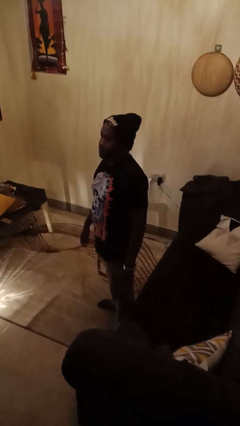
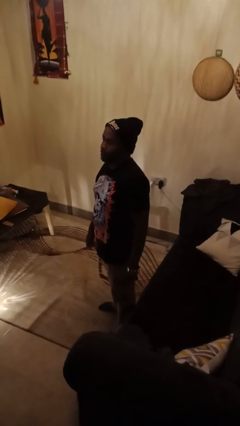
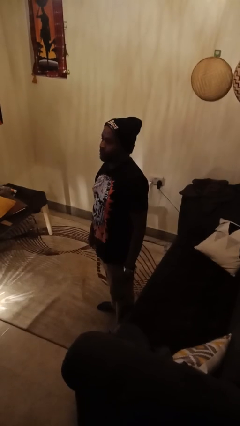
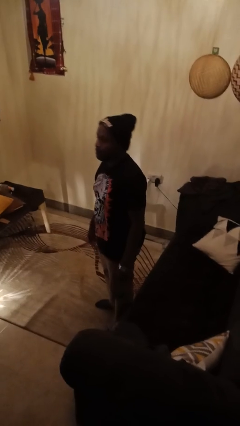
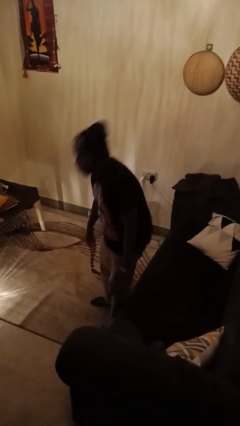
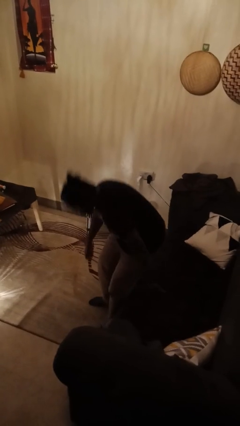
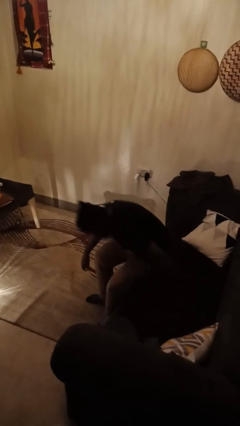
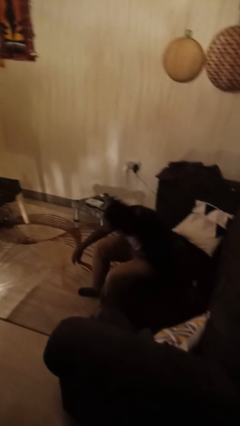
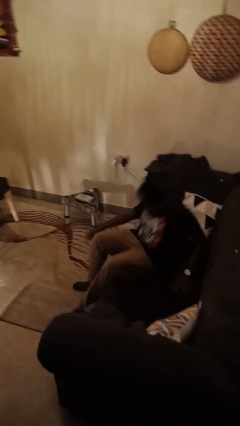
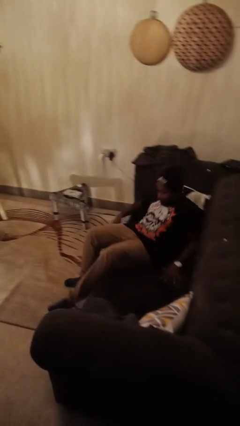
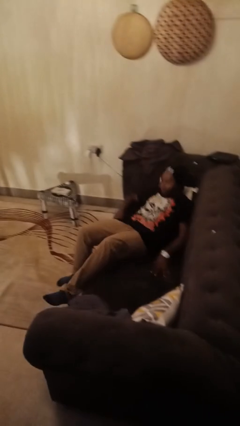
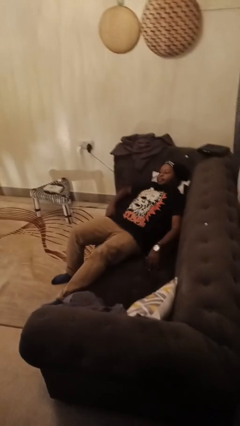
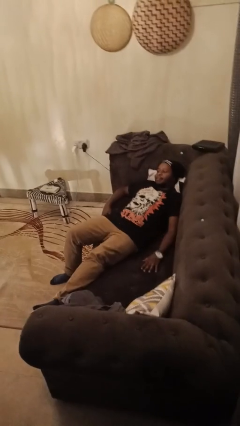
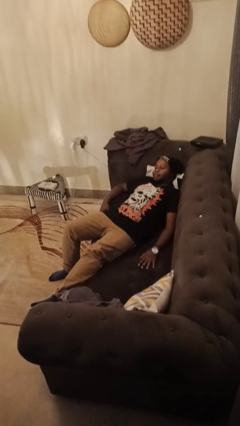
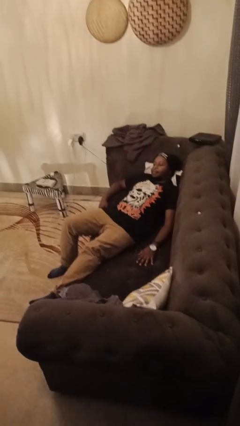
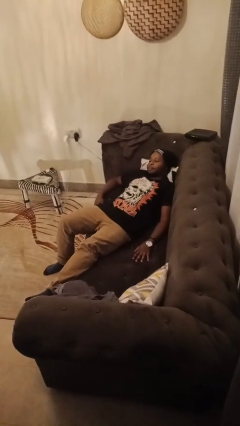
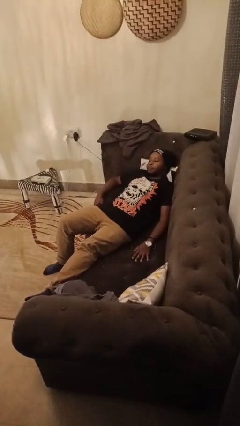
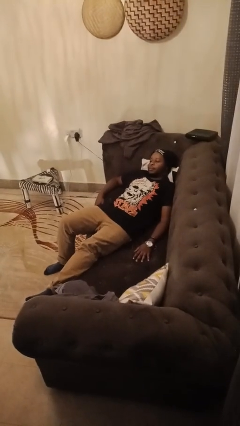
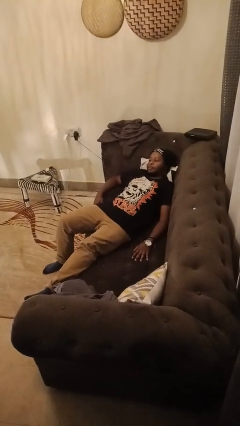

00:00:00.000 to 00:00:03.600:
person lies down on couch

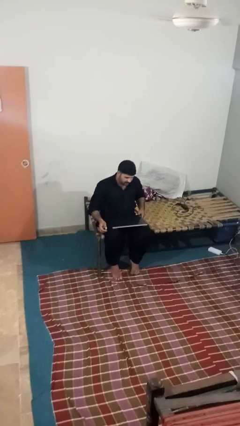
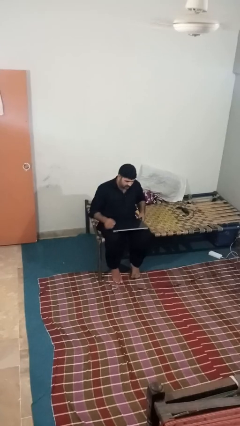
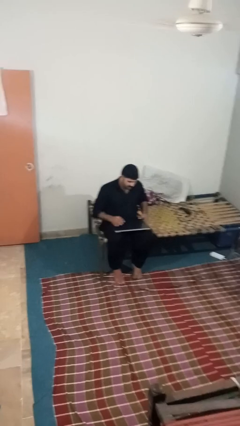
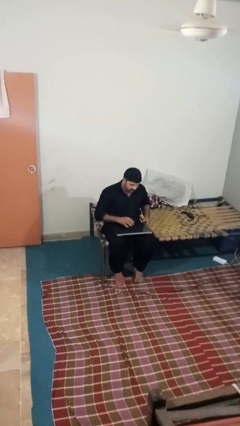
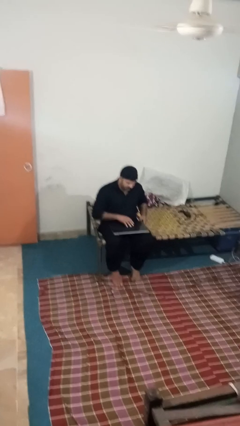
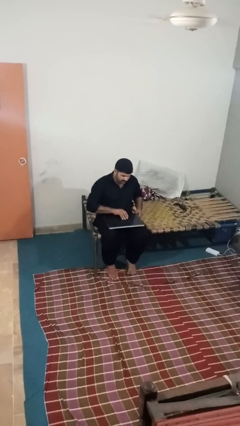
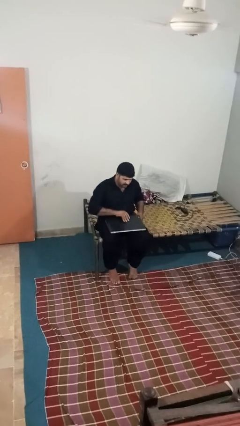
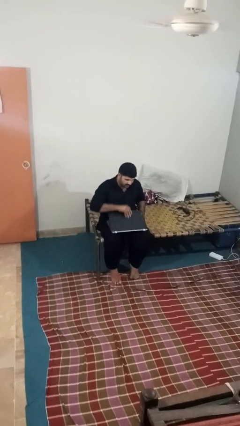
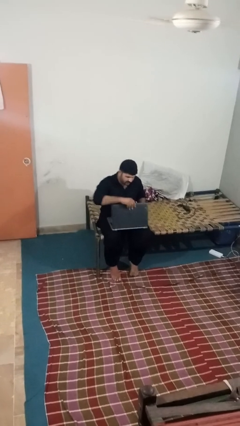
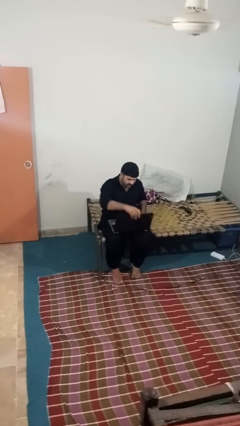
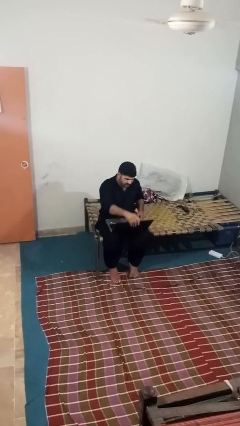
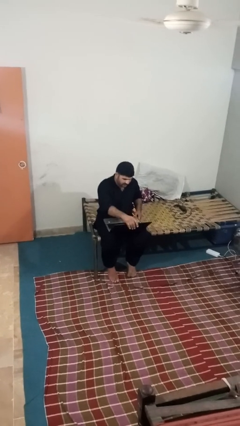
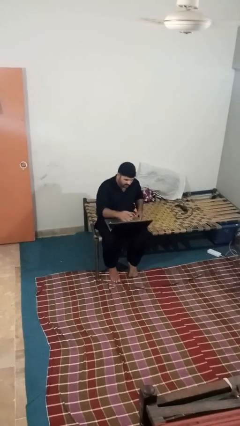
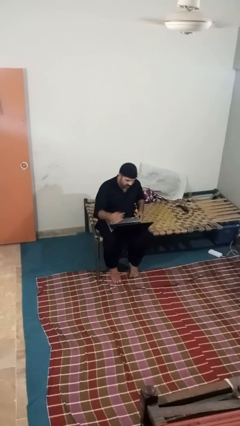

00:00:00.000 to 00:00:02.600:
person opens laptop

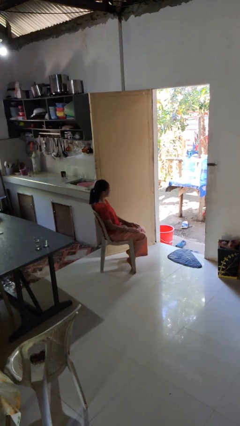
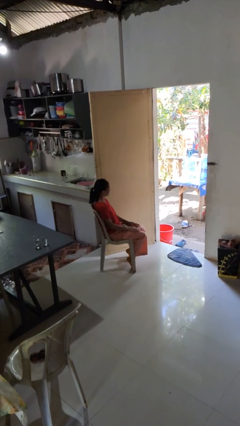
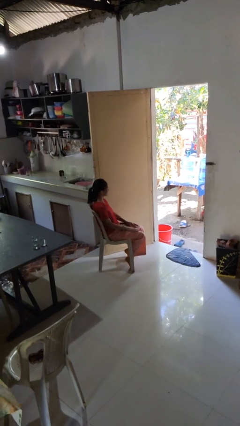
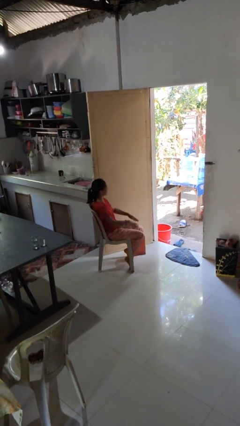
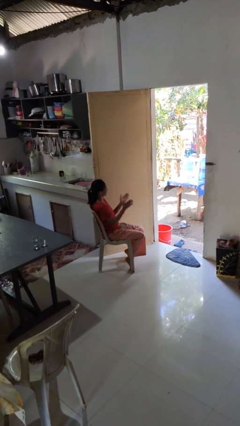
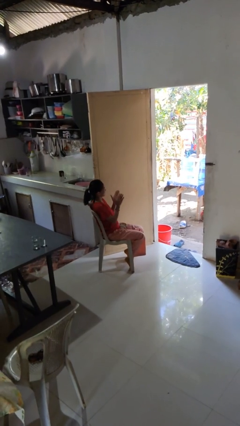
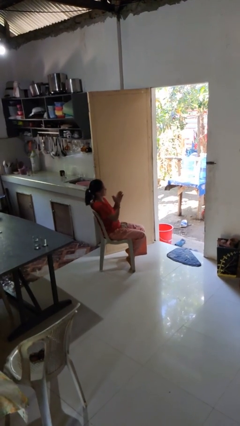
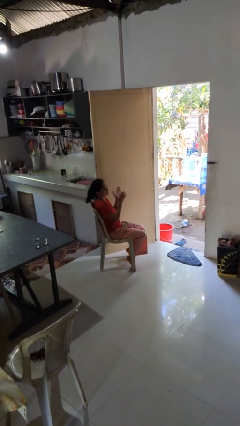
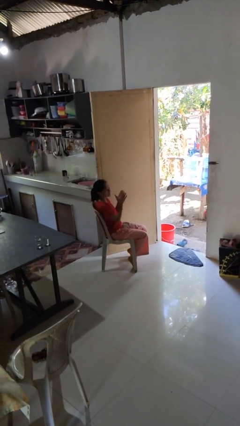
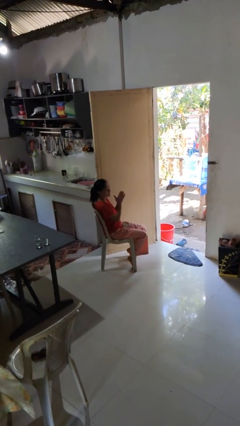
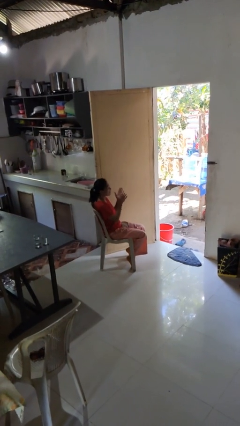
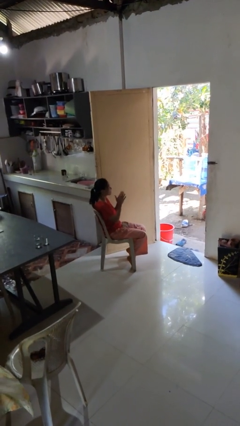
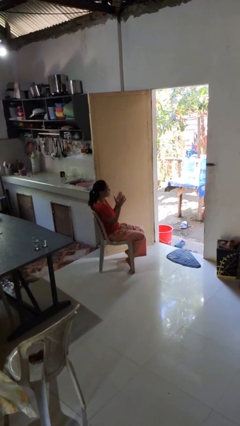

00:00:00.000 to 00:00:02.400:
person claps hands

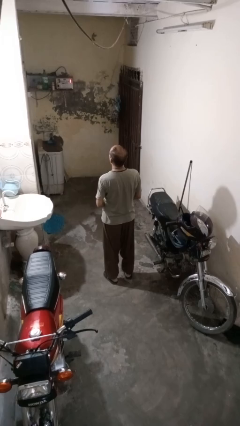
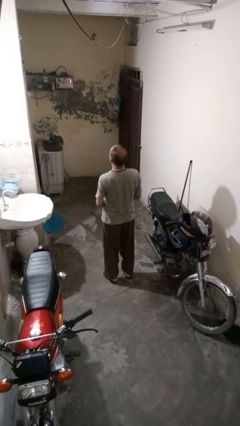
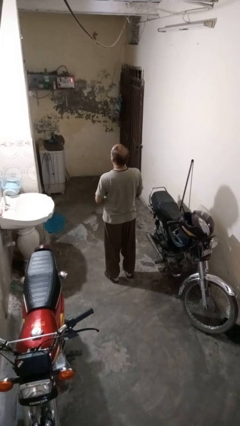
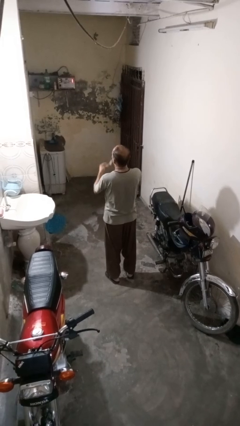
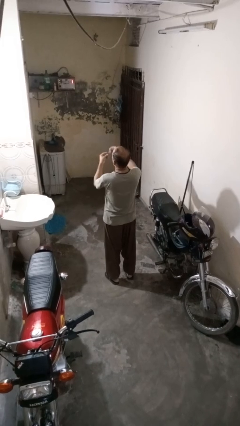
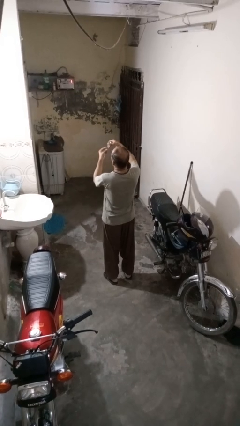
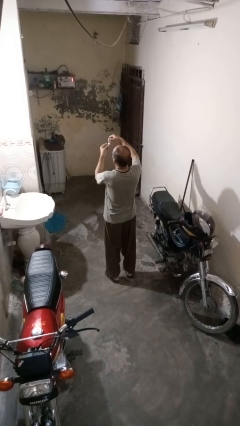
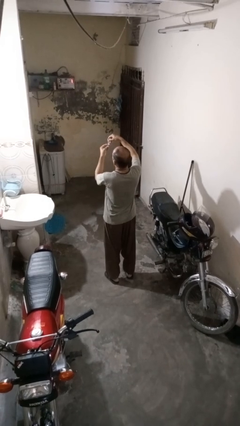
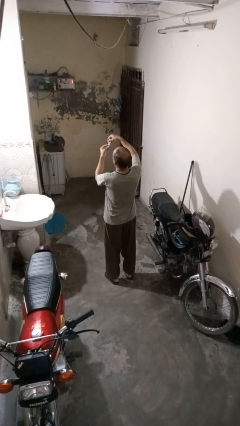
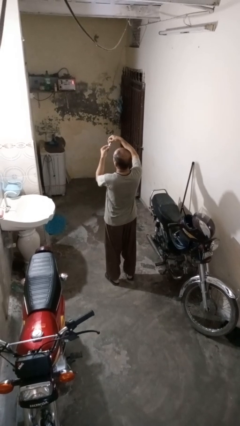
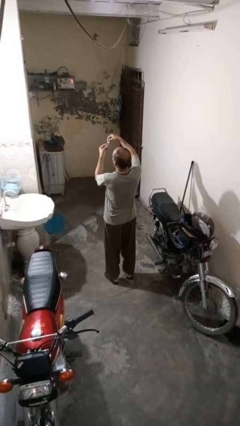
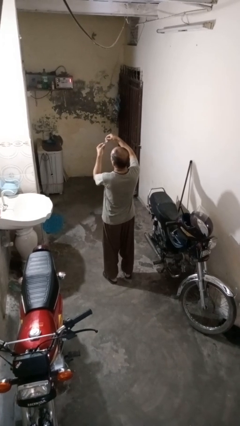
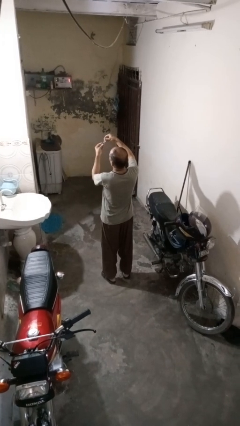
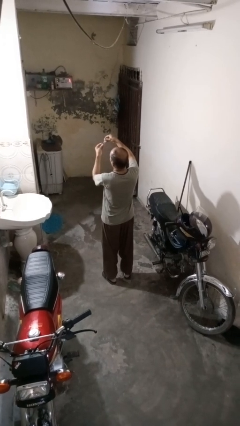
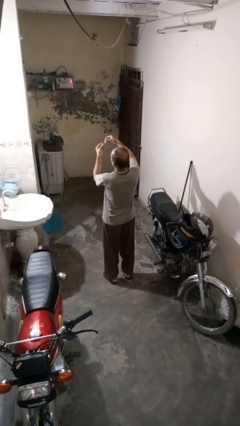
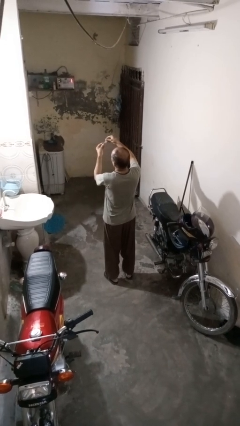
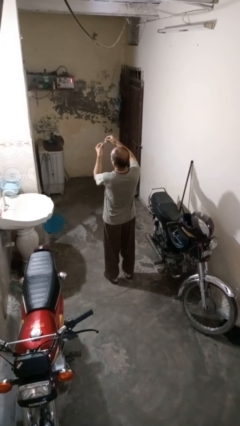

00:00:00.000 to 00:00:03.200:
person clips fingernails

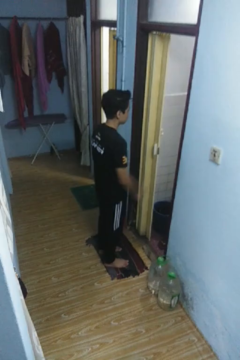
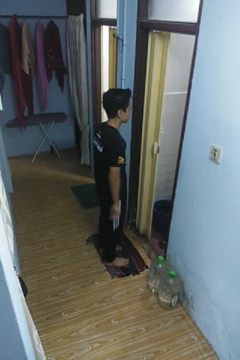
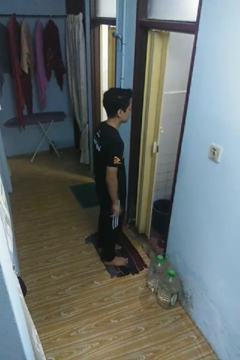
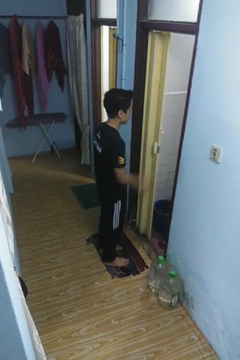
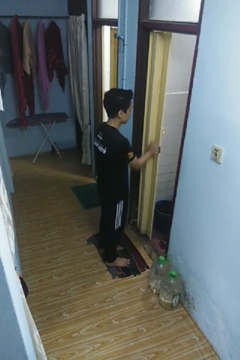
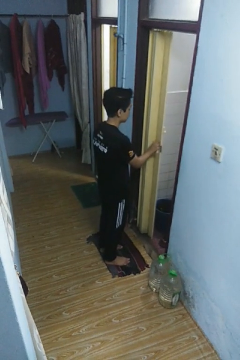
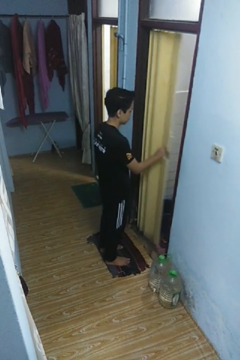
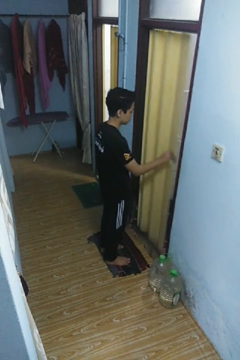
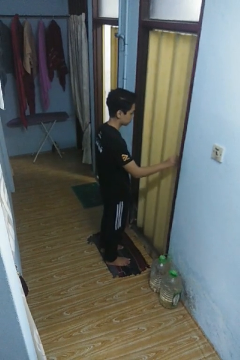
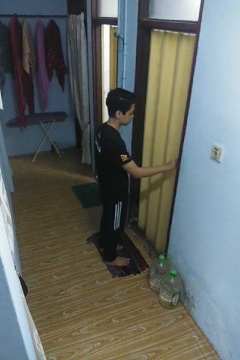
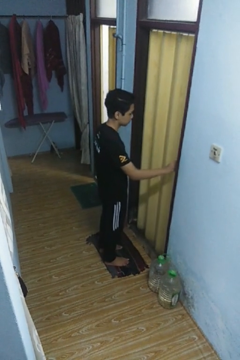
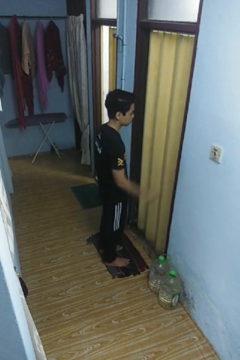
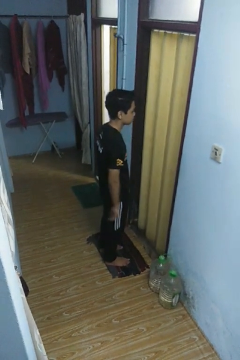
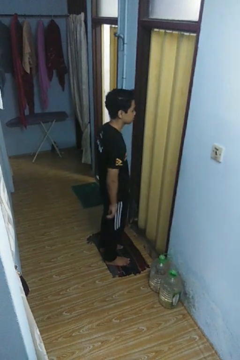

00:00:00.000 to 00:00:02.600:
person closes sliding door

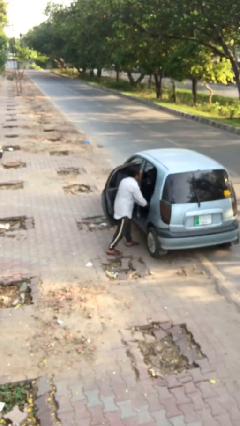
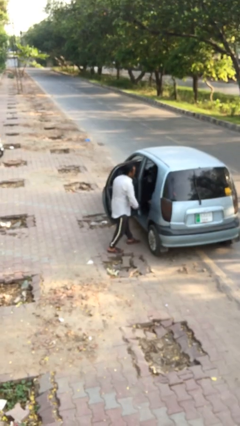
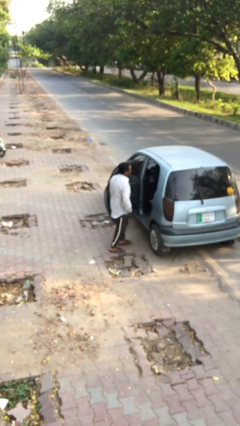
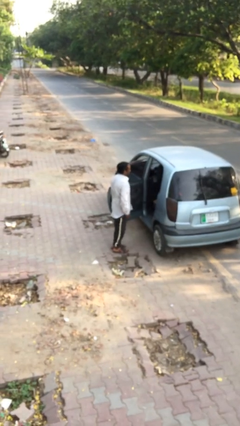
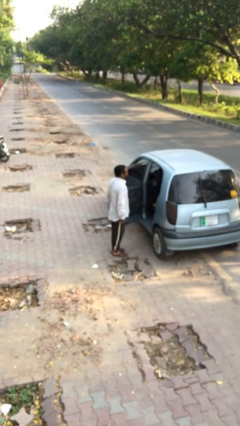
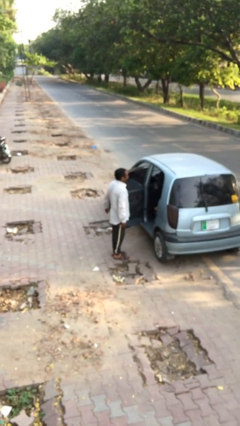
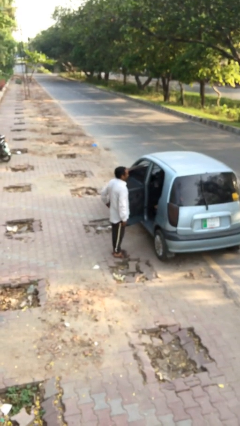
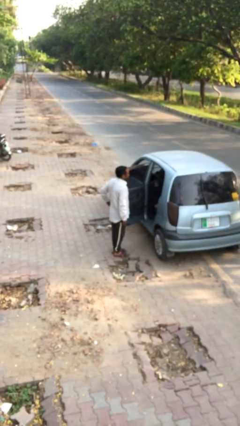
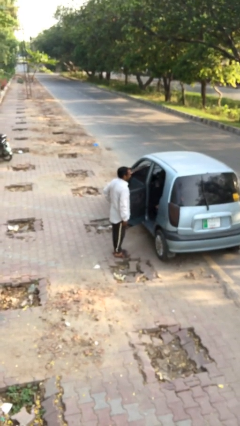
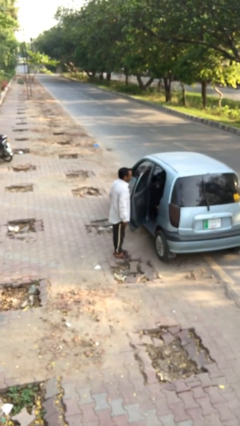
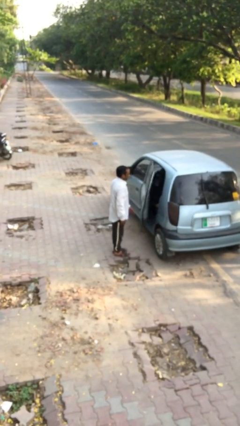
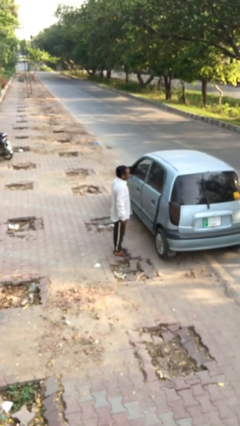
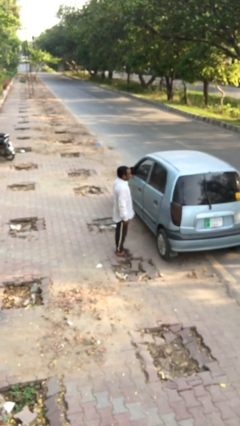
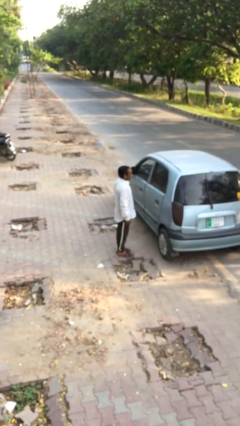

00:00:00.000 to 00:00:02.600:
person closes car door

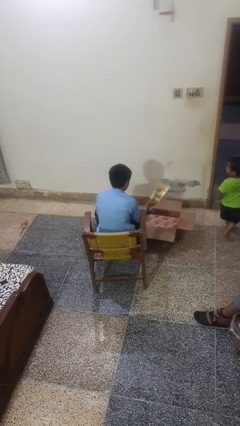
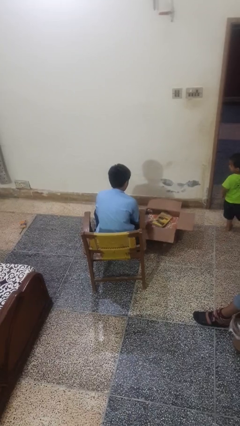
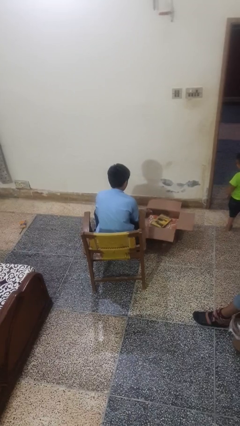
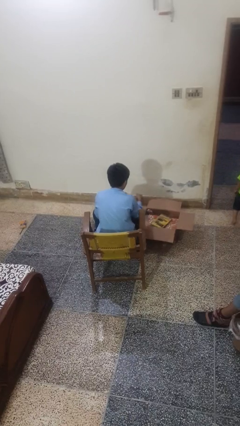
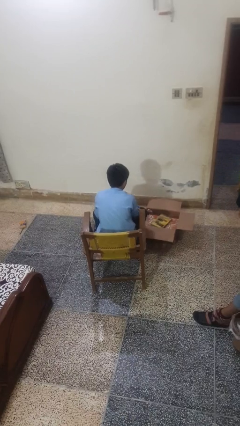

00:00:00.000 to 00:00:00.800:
person puts object into box

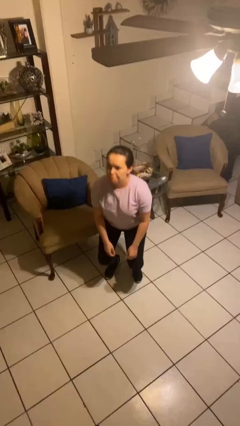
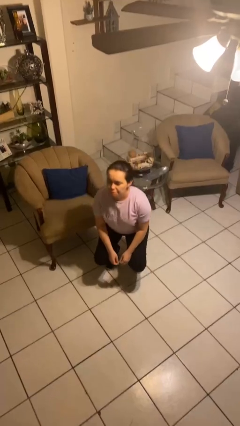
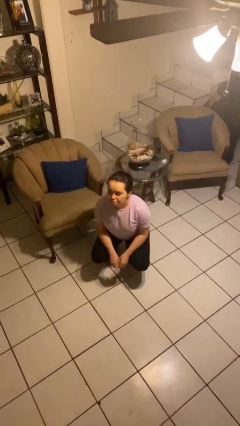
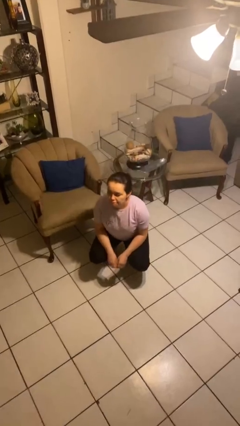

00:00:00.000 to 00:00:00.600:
person squats
